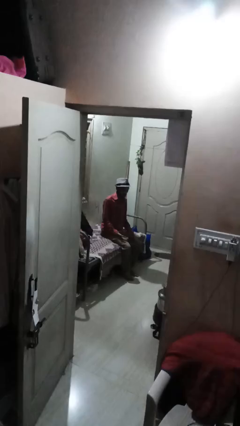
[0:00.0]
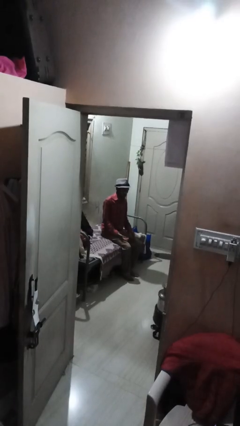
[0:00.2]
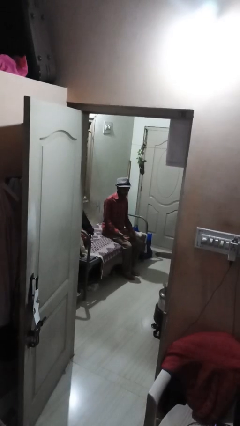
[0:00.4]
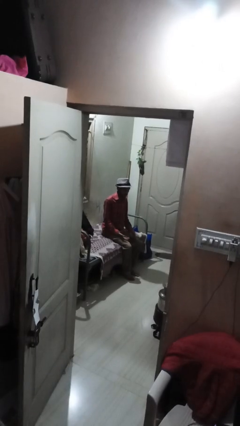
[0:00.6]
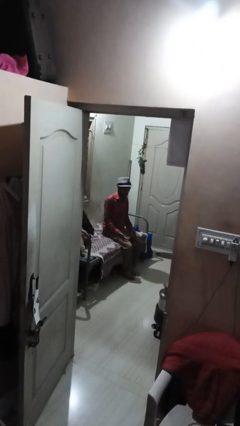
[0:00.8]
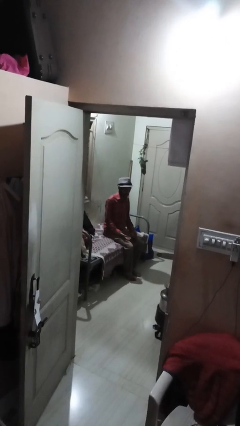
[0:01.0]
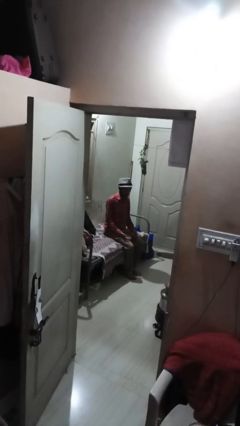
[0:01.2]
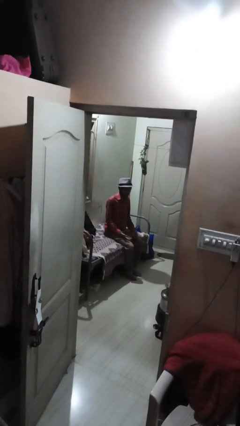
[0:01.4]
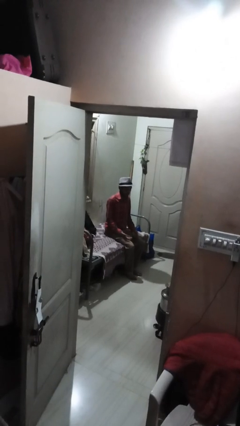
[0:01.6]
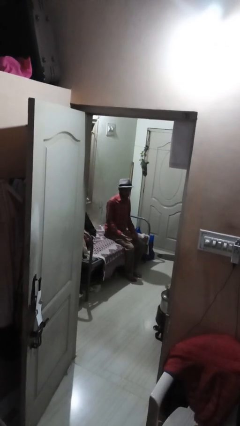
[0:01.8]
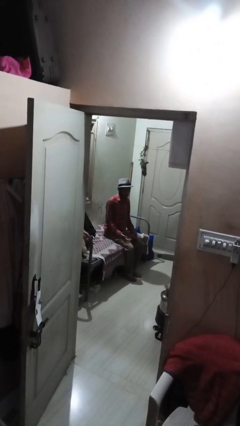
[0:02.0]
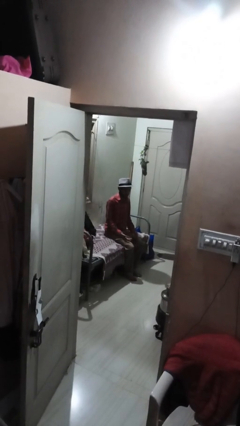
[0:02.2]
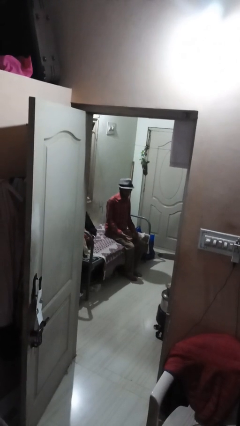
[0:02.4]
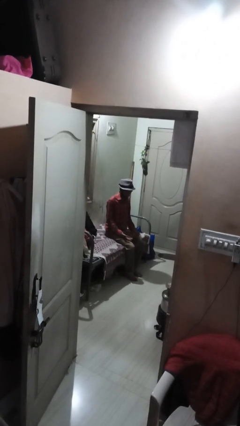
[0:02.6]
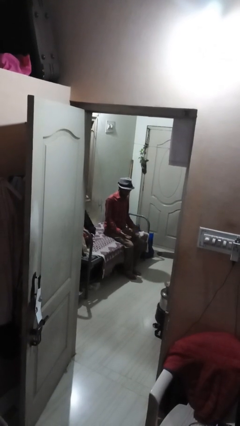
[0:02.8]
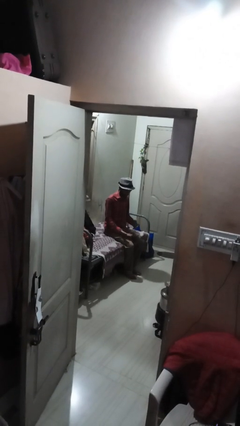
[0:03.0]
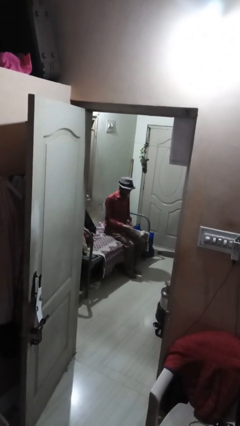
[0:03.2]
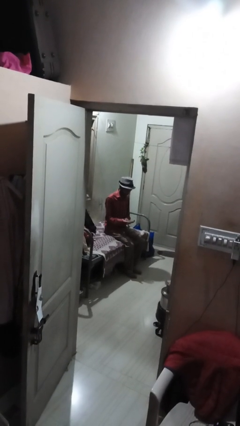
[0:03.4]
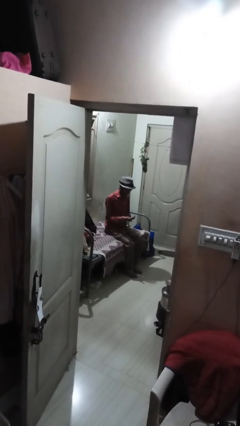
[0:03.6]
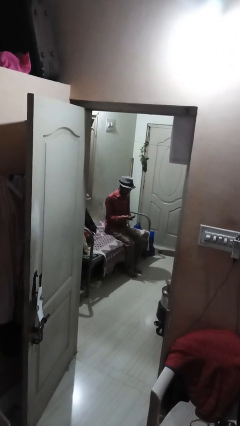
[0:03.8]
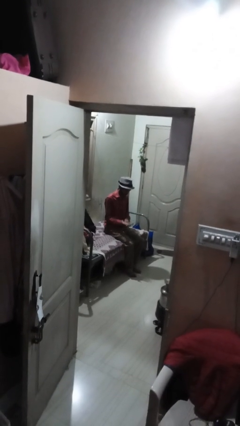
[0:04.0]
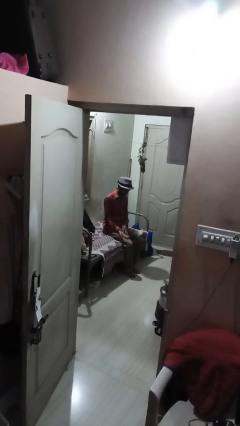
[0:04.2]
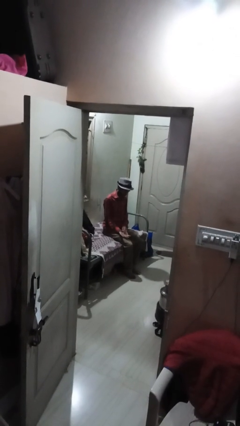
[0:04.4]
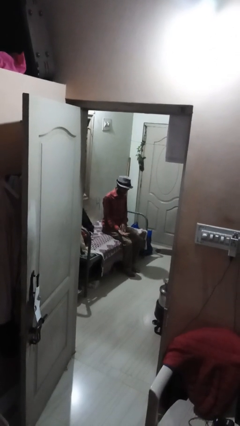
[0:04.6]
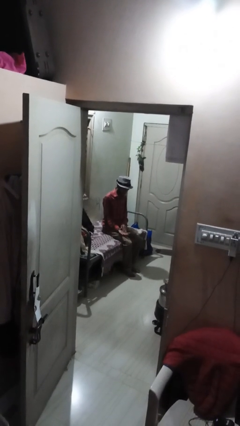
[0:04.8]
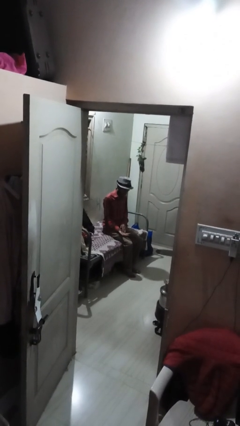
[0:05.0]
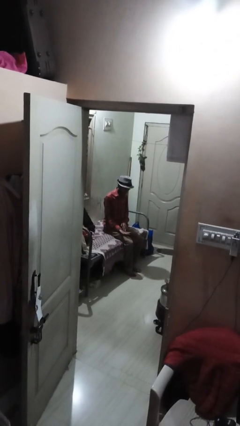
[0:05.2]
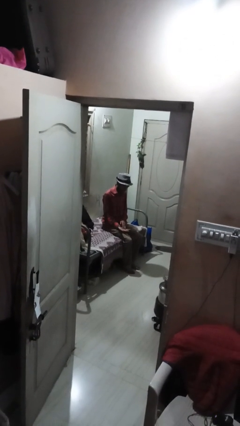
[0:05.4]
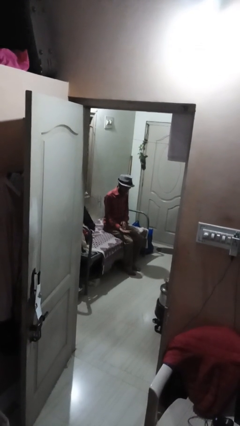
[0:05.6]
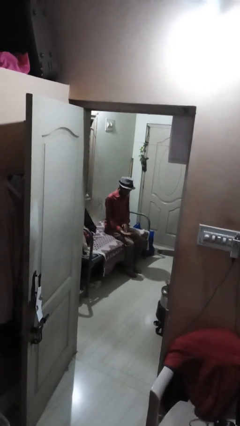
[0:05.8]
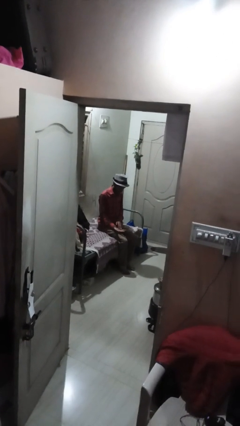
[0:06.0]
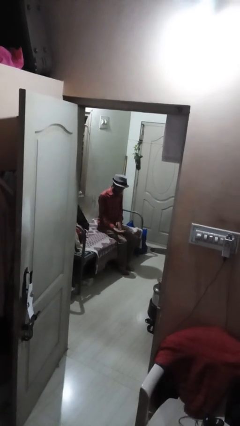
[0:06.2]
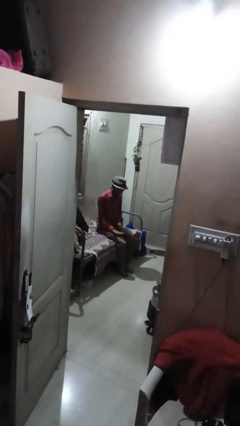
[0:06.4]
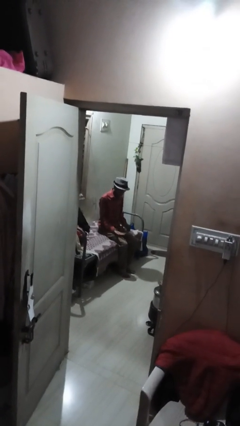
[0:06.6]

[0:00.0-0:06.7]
person looks at hands in lap

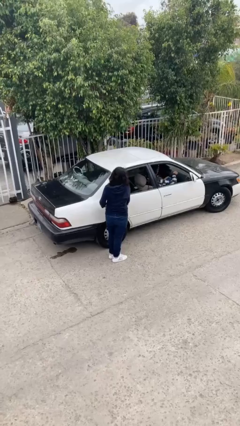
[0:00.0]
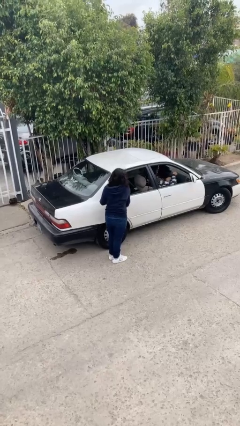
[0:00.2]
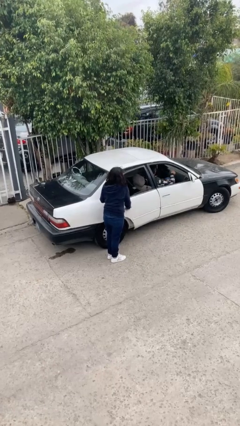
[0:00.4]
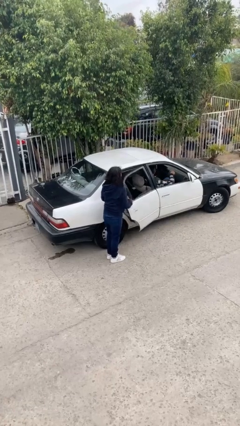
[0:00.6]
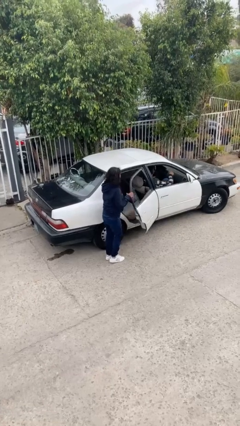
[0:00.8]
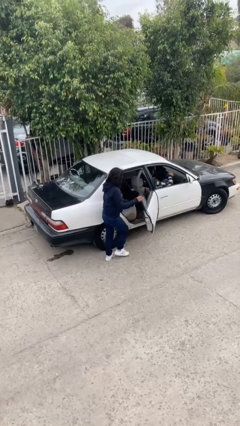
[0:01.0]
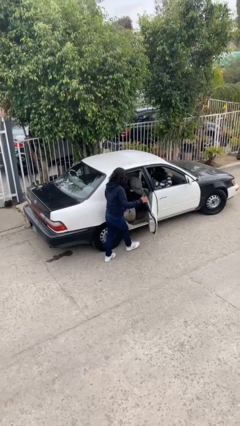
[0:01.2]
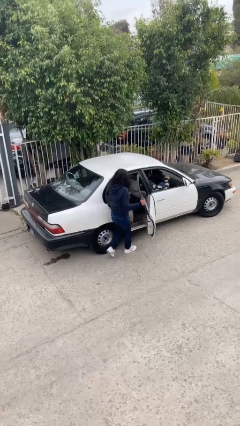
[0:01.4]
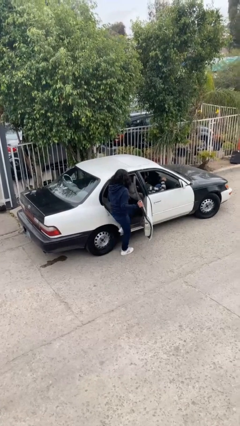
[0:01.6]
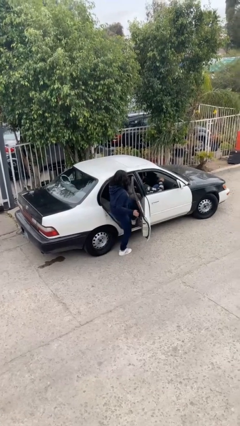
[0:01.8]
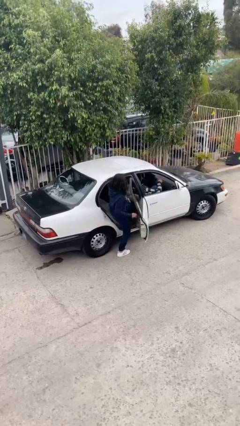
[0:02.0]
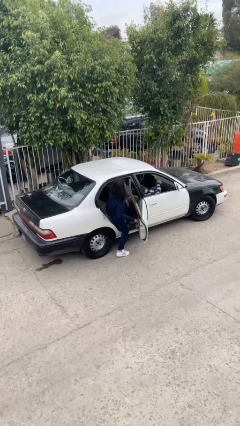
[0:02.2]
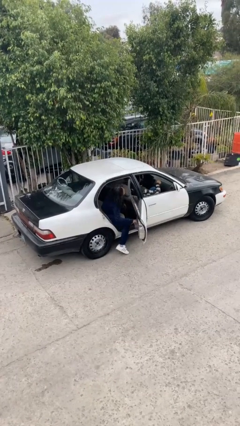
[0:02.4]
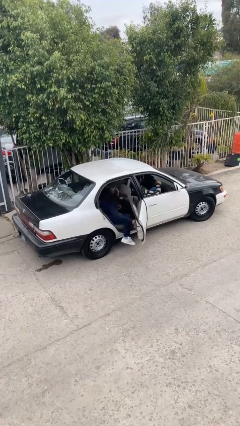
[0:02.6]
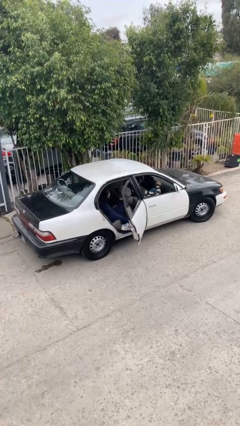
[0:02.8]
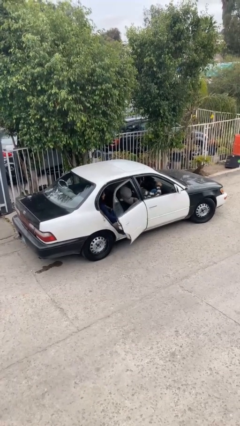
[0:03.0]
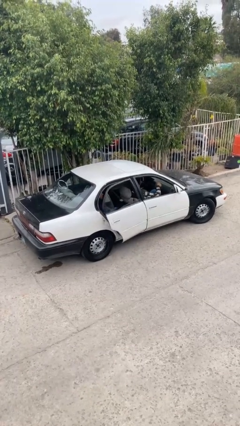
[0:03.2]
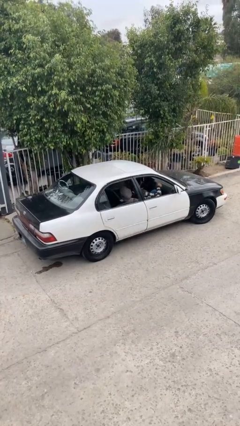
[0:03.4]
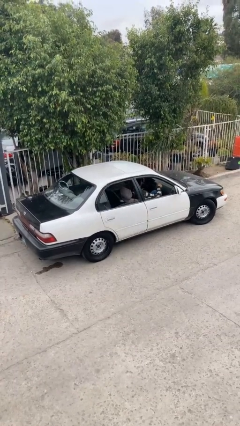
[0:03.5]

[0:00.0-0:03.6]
car picks up person

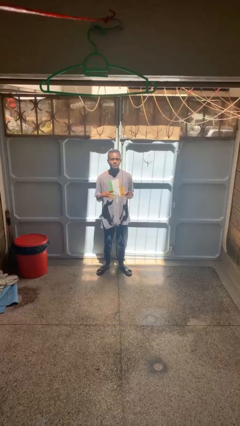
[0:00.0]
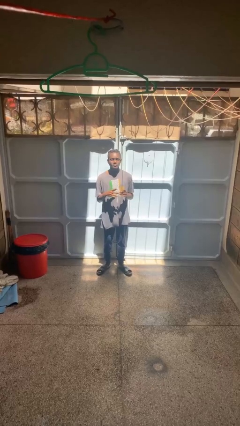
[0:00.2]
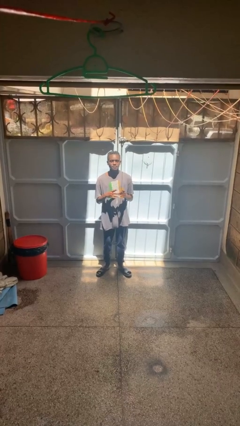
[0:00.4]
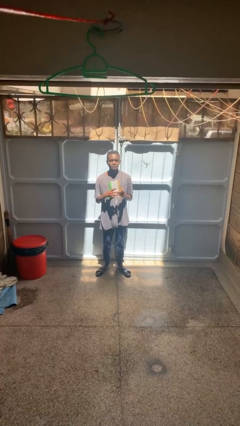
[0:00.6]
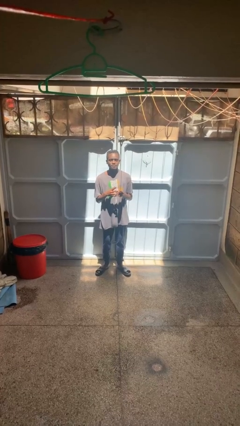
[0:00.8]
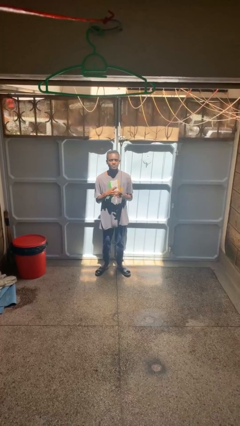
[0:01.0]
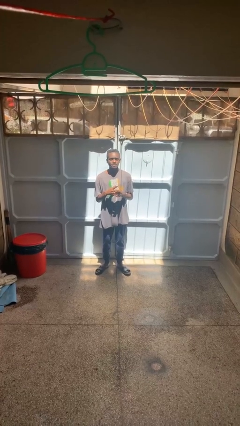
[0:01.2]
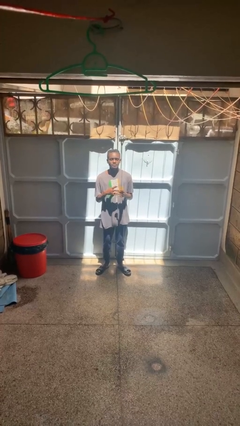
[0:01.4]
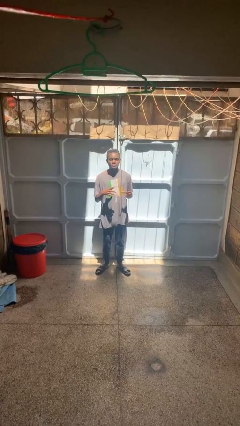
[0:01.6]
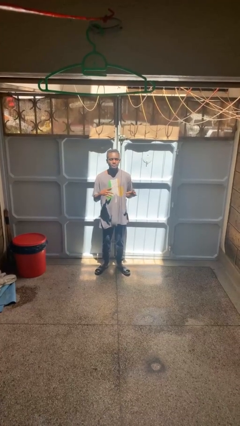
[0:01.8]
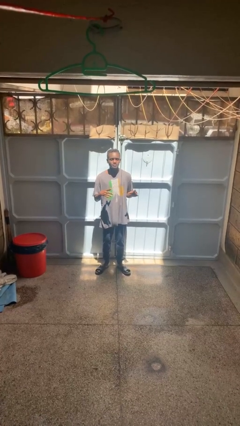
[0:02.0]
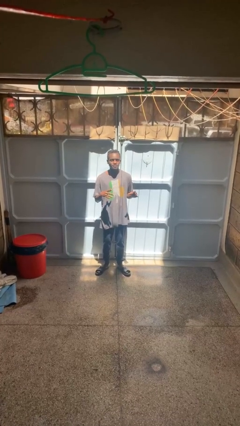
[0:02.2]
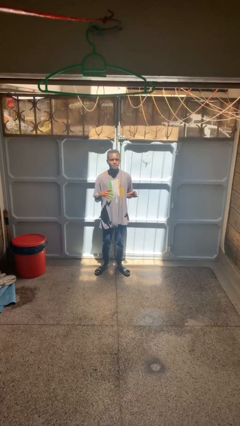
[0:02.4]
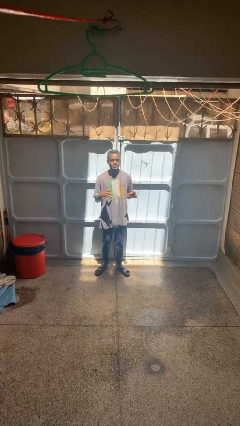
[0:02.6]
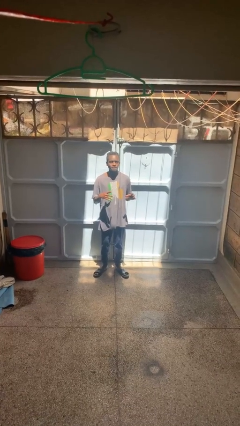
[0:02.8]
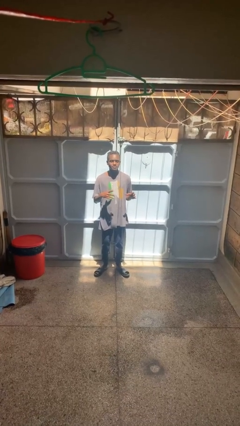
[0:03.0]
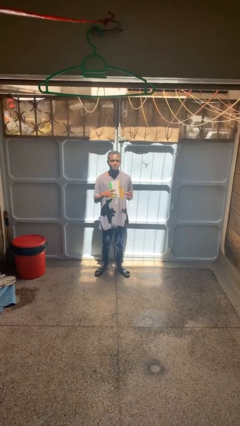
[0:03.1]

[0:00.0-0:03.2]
person puts on ring

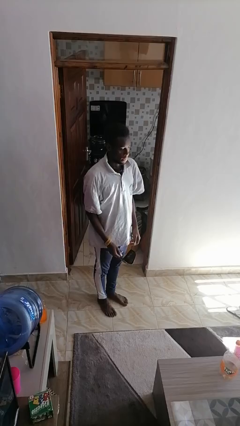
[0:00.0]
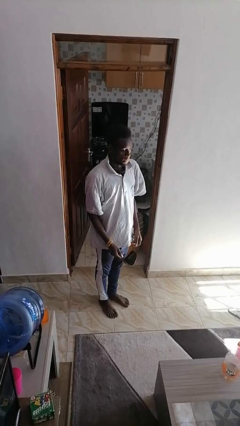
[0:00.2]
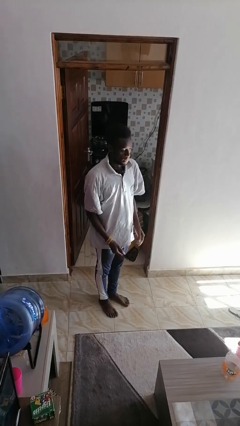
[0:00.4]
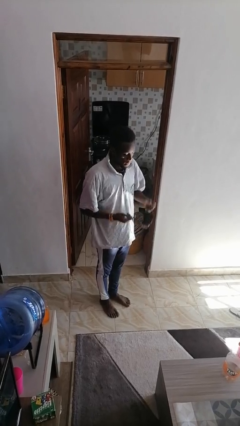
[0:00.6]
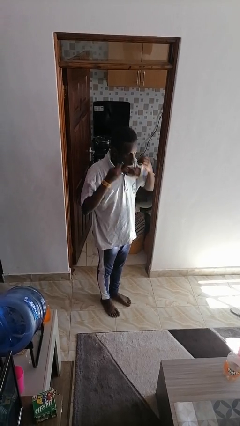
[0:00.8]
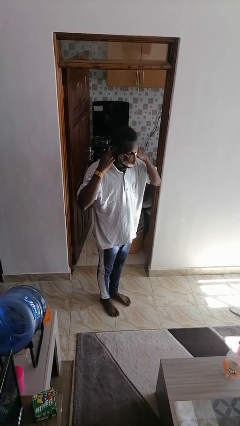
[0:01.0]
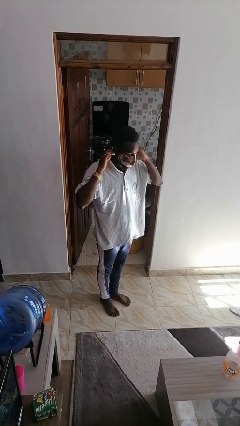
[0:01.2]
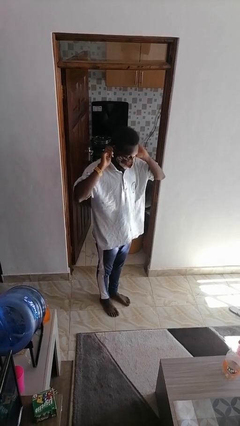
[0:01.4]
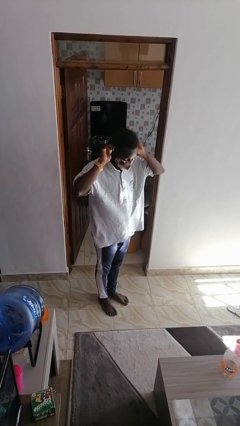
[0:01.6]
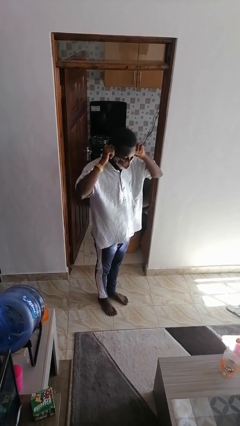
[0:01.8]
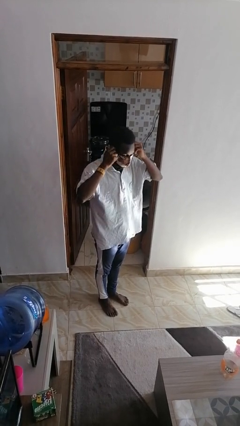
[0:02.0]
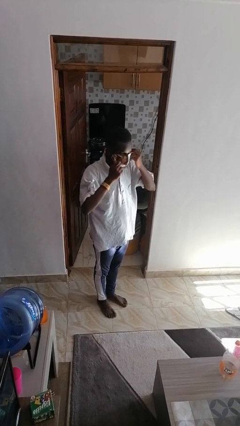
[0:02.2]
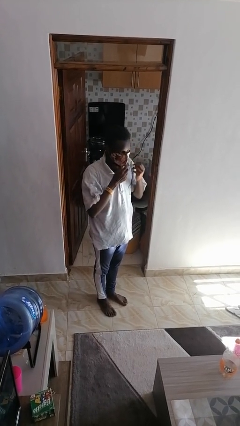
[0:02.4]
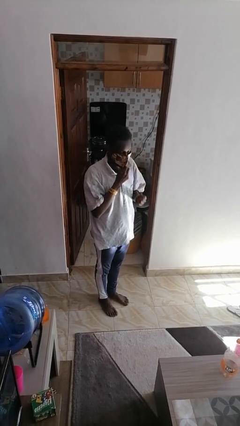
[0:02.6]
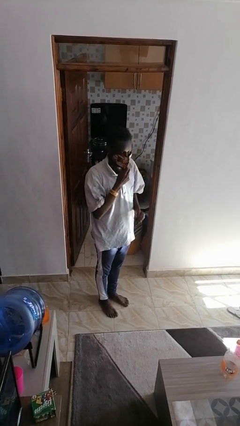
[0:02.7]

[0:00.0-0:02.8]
person puts on facemask

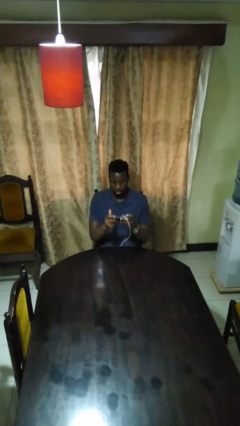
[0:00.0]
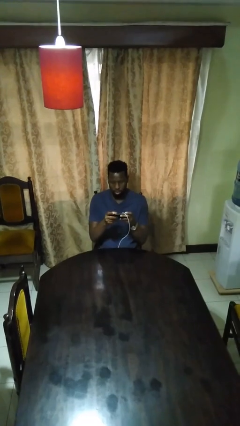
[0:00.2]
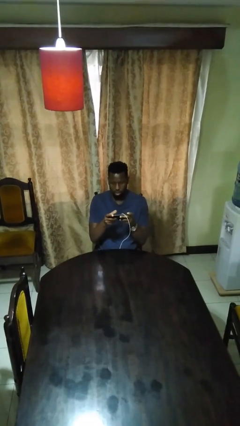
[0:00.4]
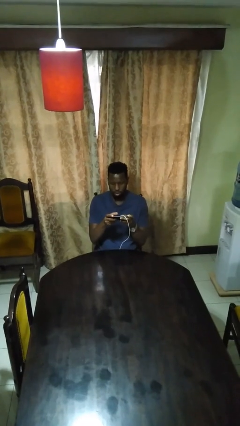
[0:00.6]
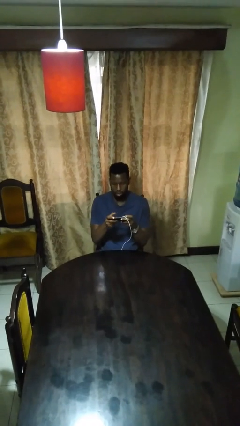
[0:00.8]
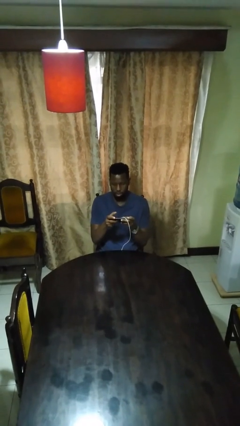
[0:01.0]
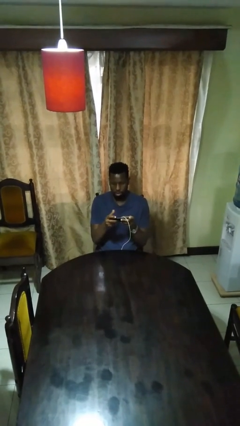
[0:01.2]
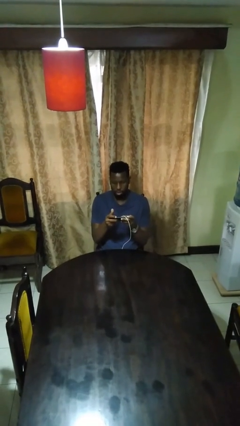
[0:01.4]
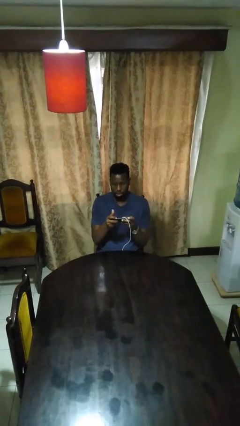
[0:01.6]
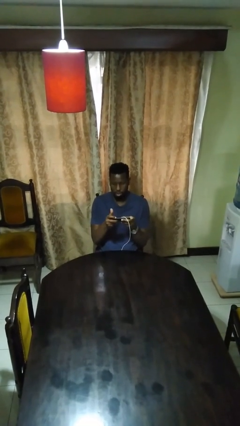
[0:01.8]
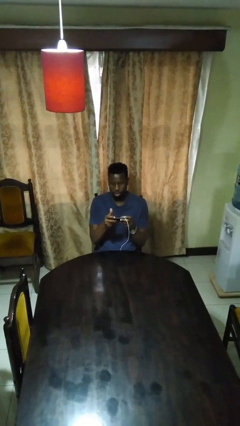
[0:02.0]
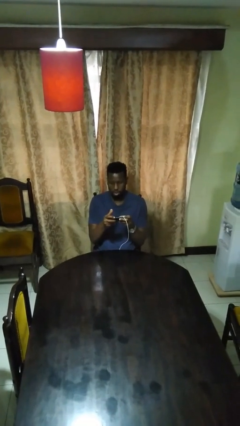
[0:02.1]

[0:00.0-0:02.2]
person interacts with handheld game
